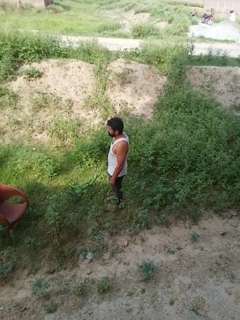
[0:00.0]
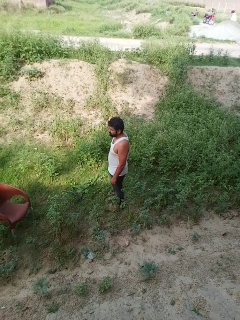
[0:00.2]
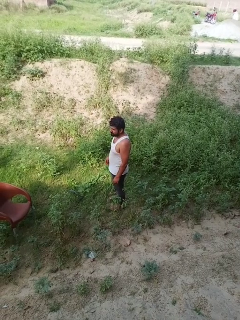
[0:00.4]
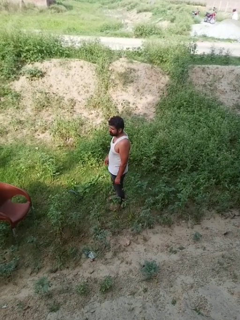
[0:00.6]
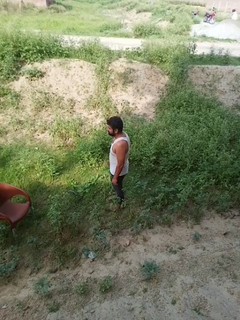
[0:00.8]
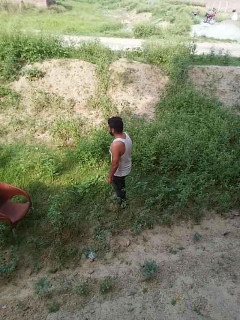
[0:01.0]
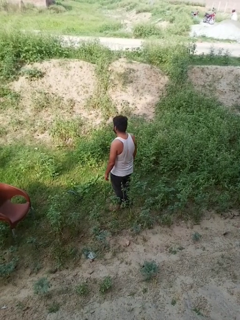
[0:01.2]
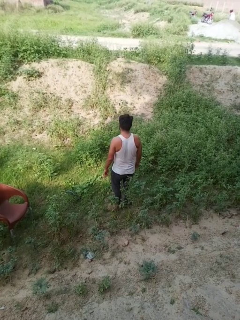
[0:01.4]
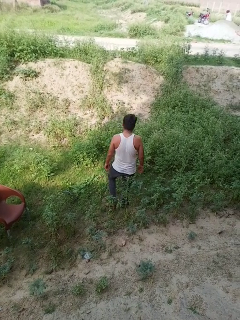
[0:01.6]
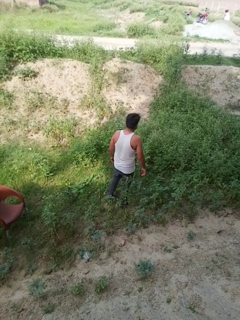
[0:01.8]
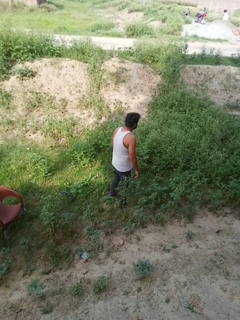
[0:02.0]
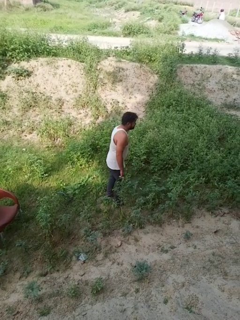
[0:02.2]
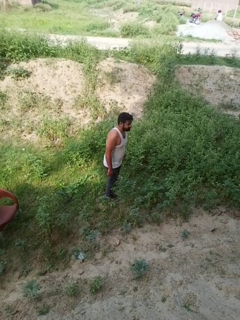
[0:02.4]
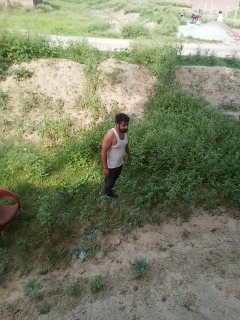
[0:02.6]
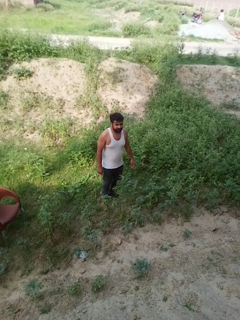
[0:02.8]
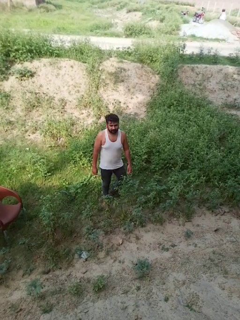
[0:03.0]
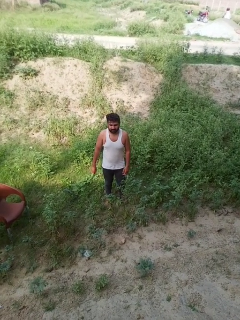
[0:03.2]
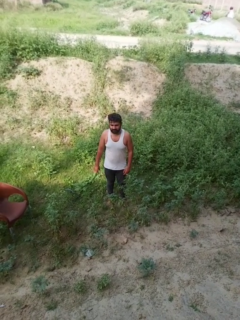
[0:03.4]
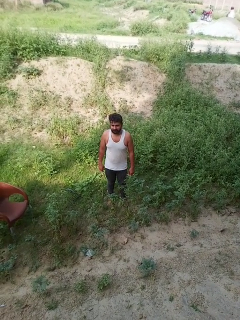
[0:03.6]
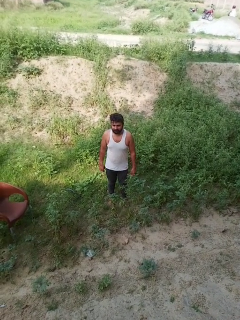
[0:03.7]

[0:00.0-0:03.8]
person twirls

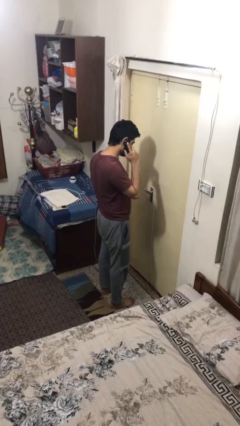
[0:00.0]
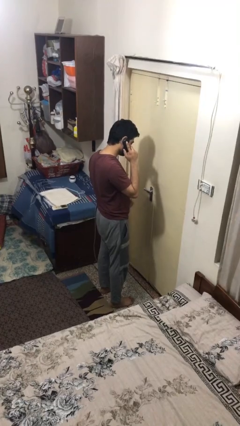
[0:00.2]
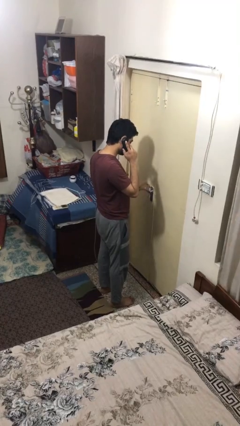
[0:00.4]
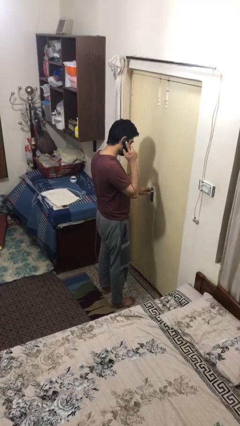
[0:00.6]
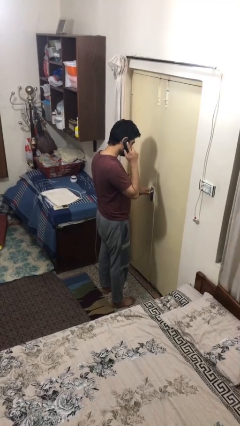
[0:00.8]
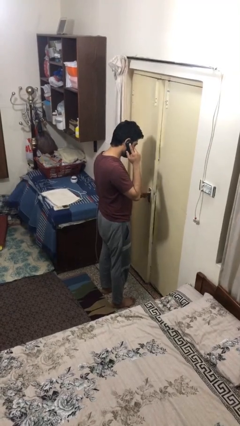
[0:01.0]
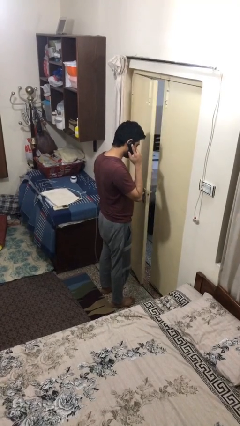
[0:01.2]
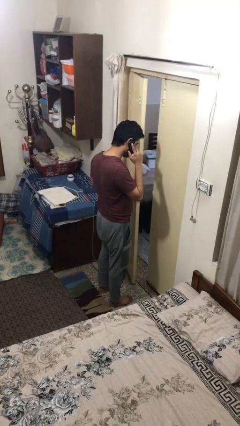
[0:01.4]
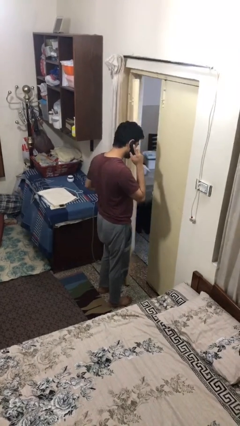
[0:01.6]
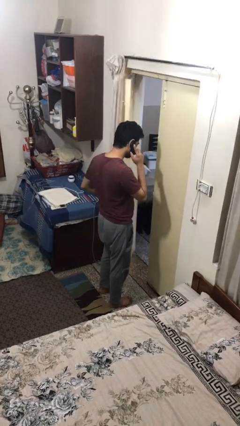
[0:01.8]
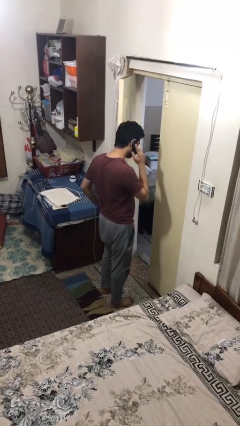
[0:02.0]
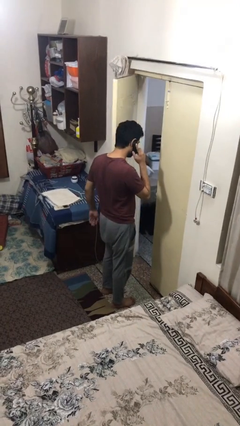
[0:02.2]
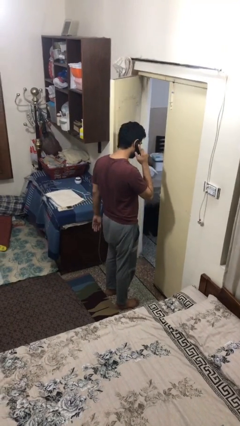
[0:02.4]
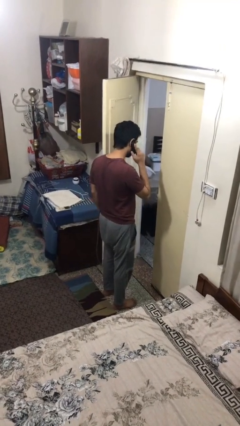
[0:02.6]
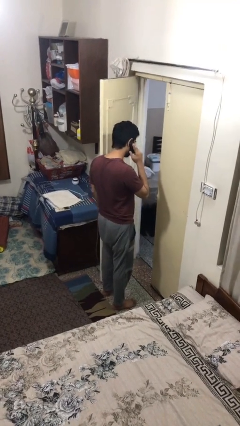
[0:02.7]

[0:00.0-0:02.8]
person opens facility door

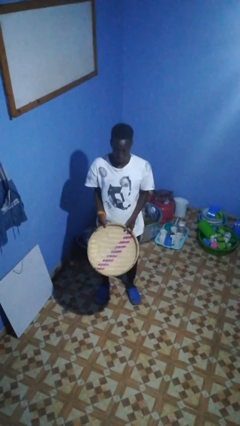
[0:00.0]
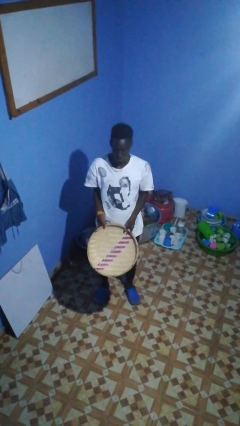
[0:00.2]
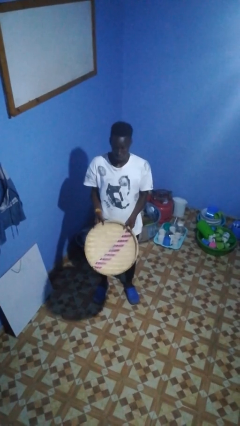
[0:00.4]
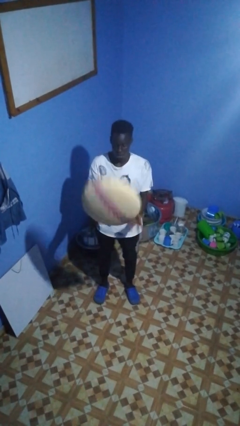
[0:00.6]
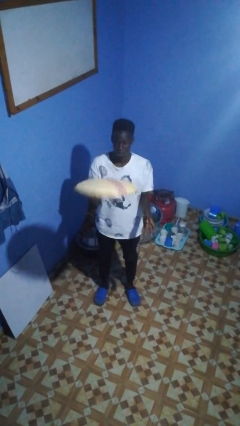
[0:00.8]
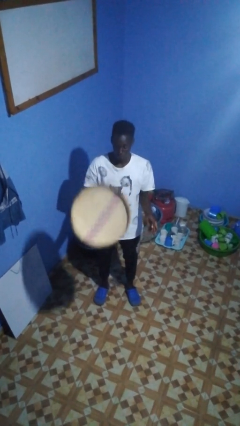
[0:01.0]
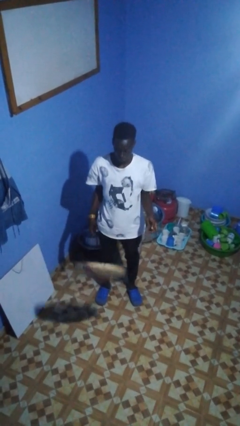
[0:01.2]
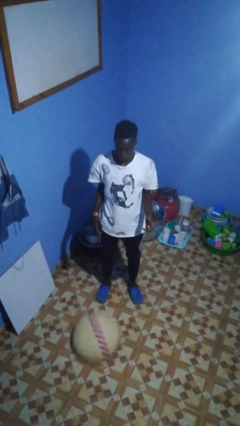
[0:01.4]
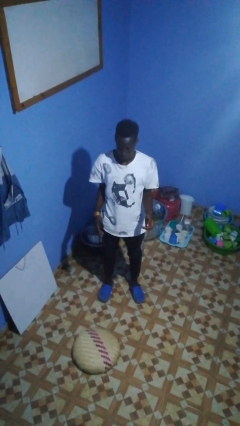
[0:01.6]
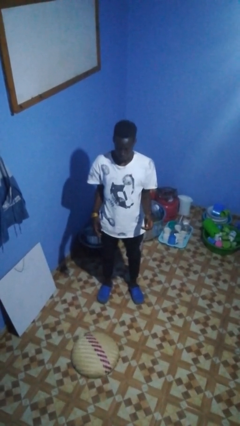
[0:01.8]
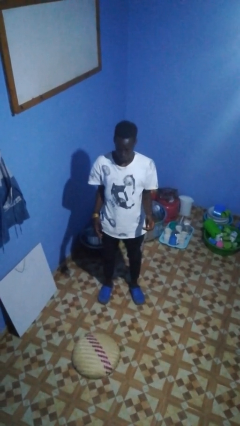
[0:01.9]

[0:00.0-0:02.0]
person throws object into air

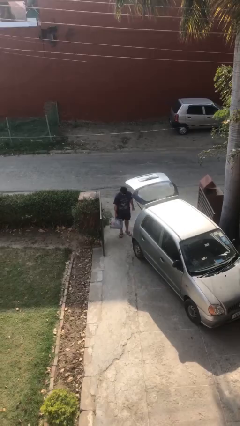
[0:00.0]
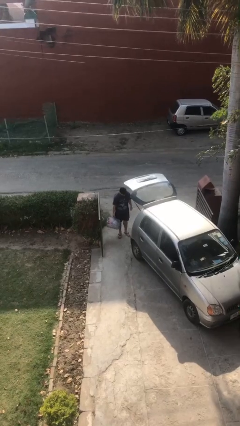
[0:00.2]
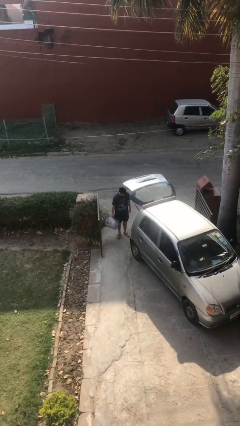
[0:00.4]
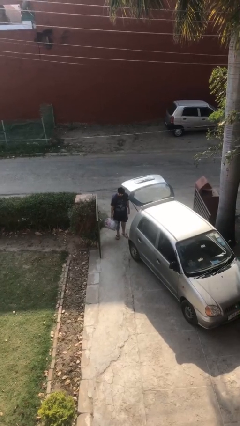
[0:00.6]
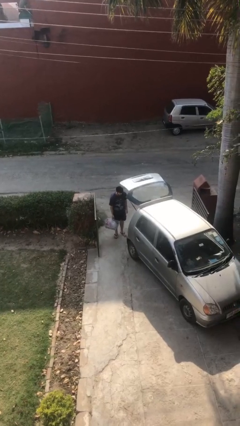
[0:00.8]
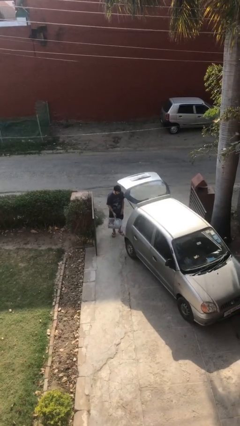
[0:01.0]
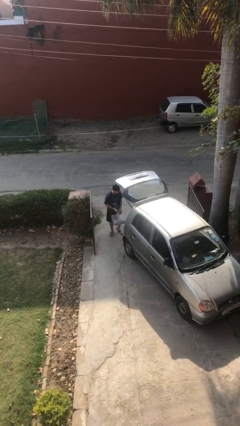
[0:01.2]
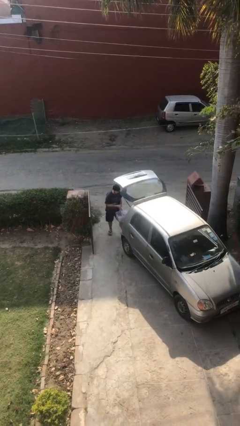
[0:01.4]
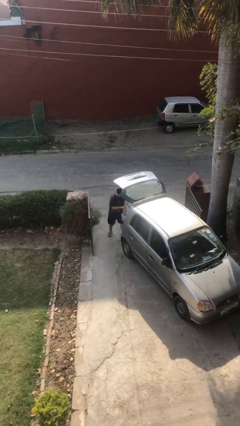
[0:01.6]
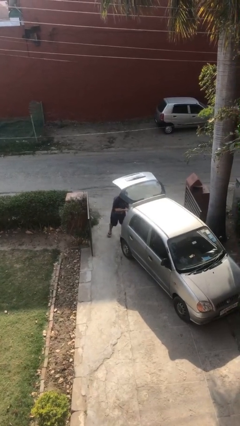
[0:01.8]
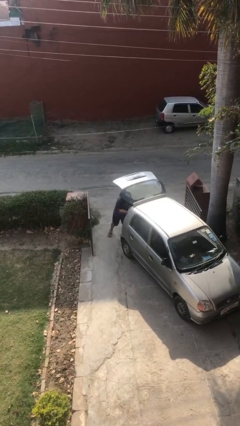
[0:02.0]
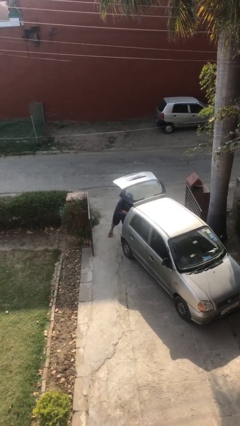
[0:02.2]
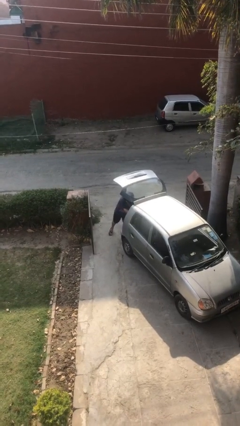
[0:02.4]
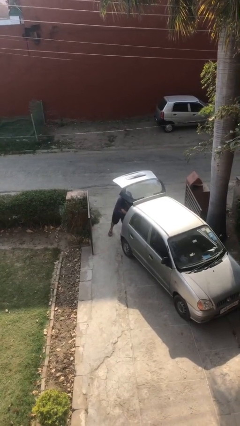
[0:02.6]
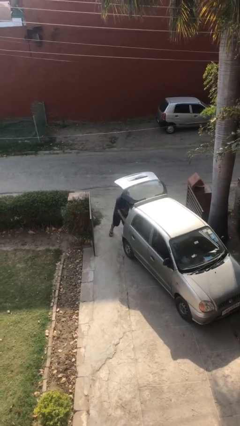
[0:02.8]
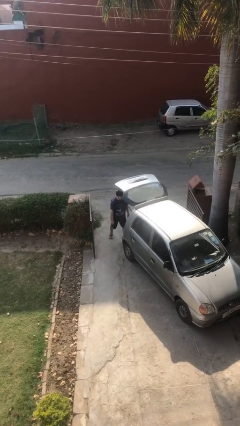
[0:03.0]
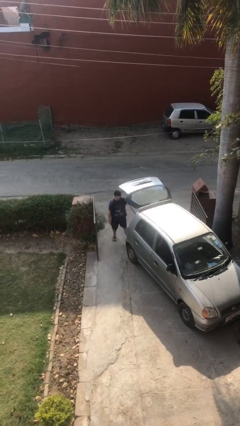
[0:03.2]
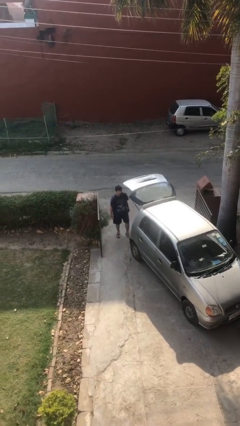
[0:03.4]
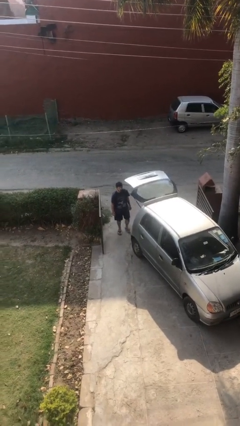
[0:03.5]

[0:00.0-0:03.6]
person loads car

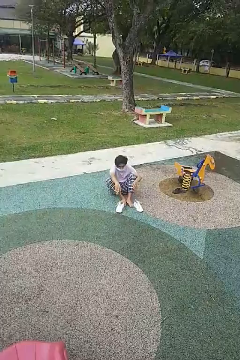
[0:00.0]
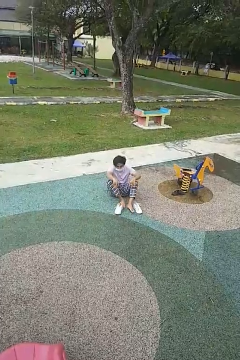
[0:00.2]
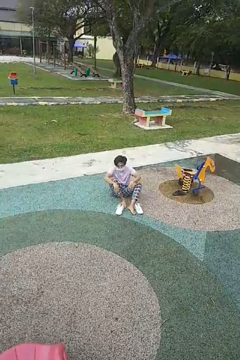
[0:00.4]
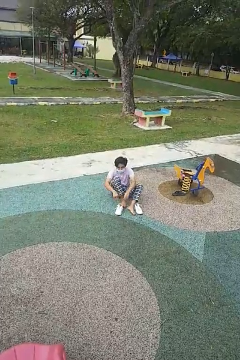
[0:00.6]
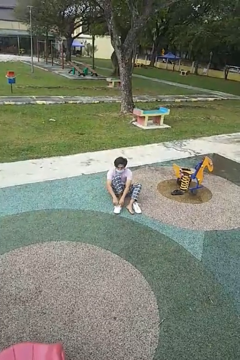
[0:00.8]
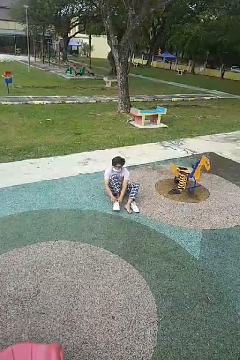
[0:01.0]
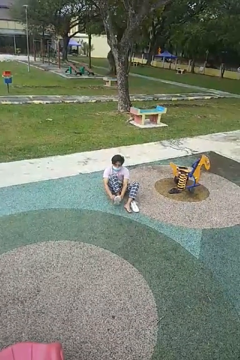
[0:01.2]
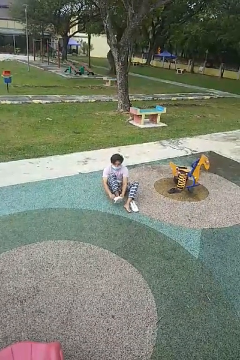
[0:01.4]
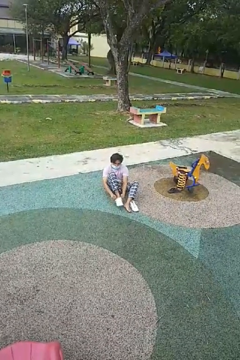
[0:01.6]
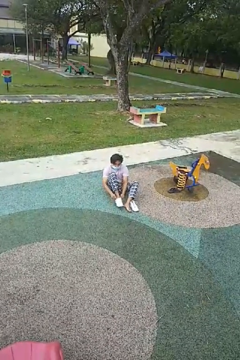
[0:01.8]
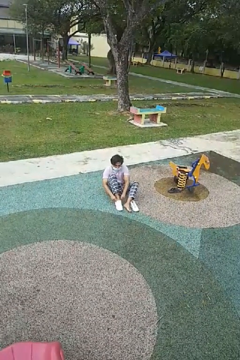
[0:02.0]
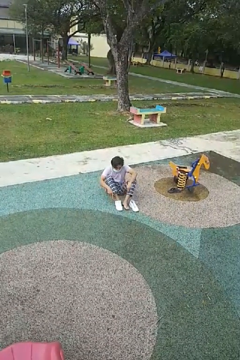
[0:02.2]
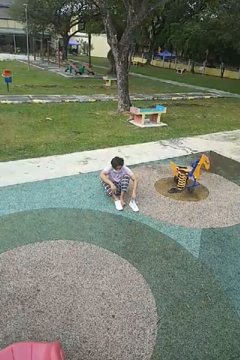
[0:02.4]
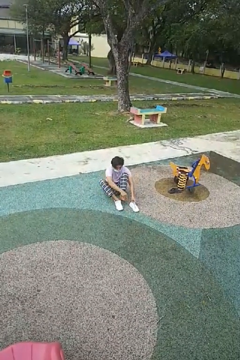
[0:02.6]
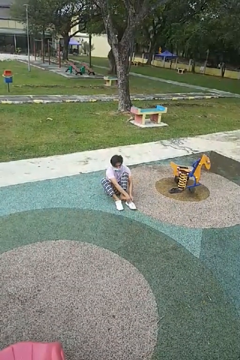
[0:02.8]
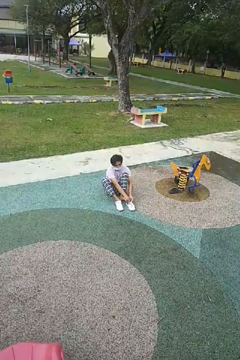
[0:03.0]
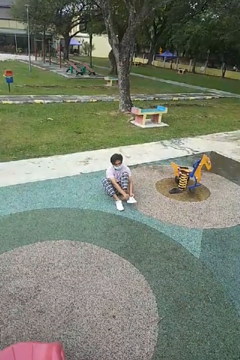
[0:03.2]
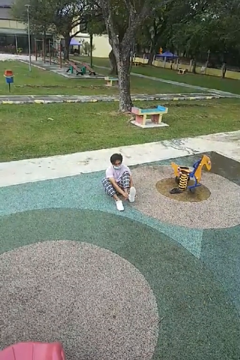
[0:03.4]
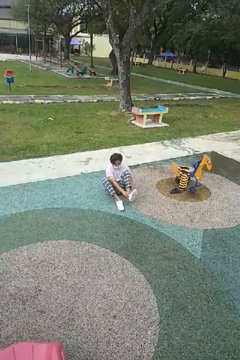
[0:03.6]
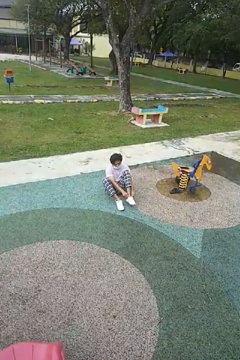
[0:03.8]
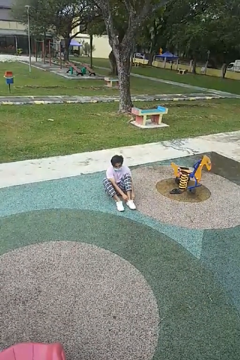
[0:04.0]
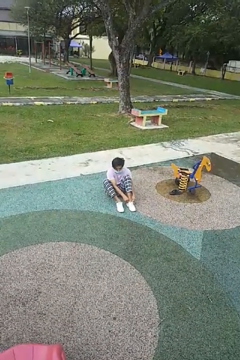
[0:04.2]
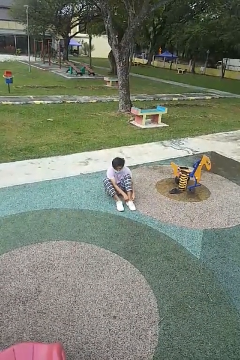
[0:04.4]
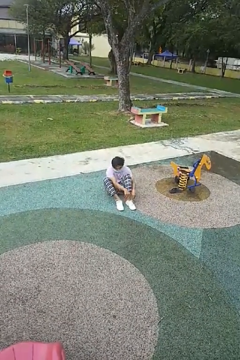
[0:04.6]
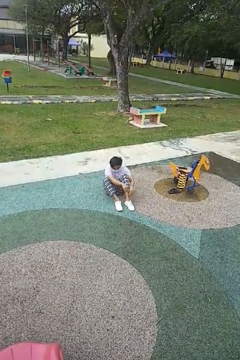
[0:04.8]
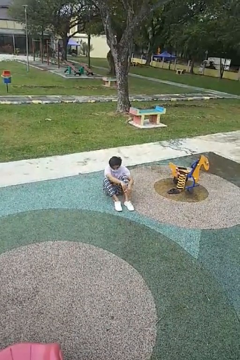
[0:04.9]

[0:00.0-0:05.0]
person puts on shoes

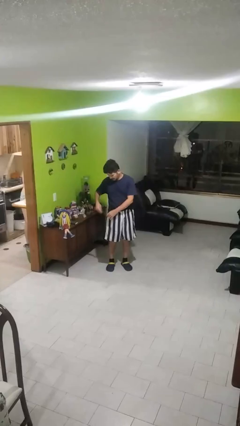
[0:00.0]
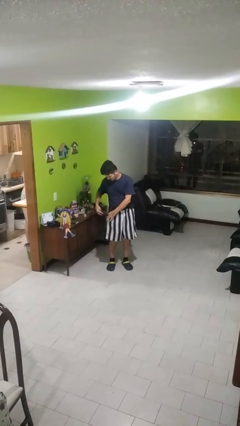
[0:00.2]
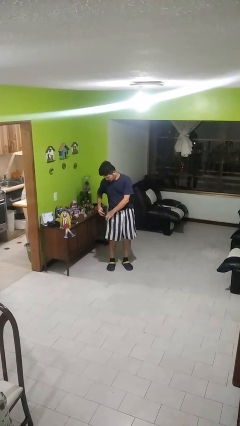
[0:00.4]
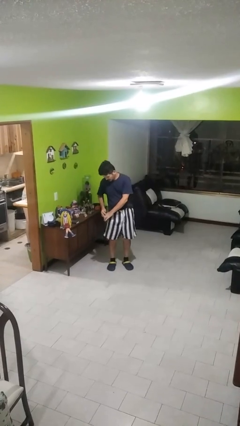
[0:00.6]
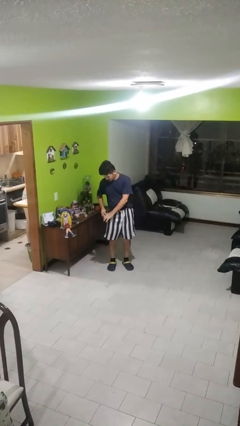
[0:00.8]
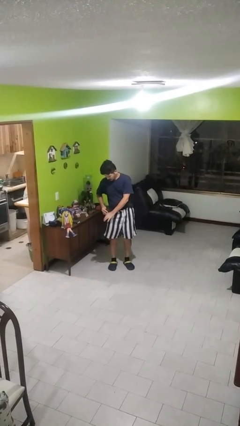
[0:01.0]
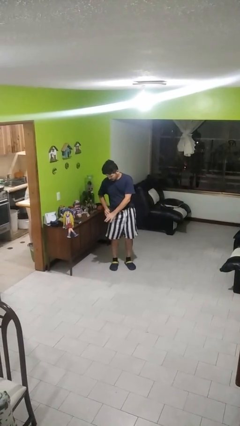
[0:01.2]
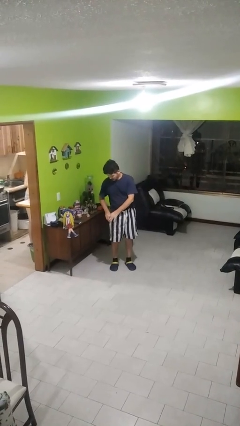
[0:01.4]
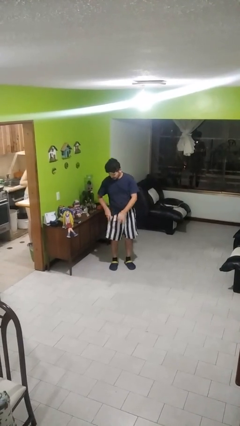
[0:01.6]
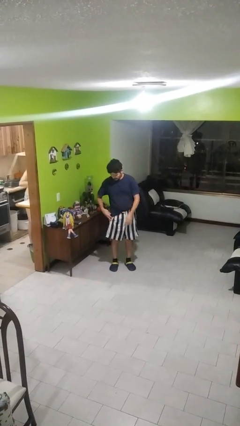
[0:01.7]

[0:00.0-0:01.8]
person puts phone into pocket

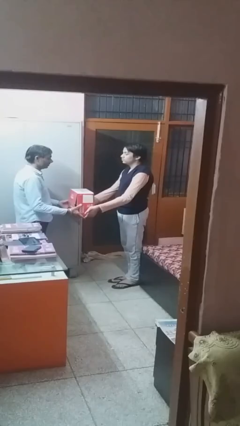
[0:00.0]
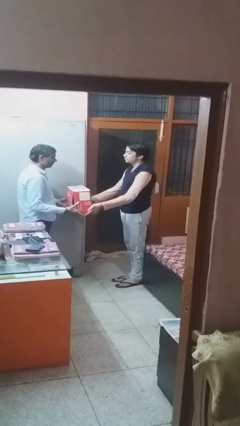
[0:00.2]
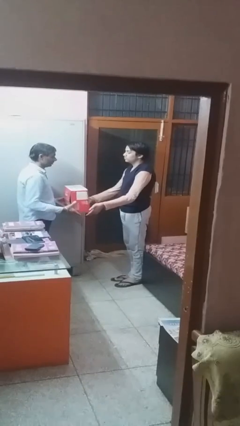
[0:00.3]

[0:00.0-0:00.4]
person transfers object to person
